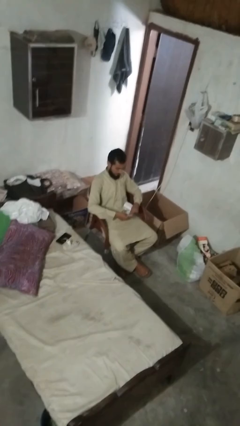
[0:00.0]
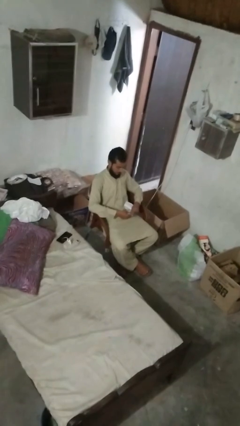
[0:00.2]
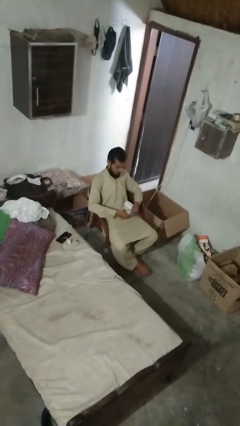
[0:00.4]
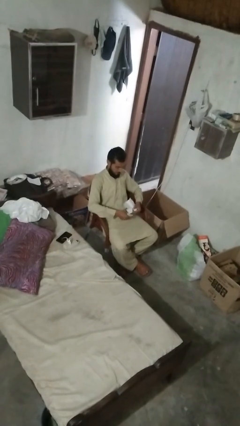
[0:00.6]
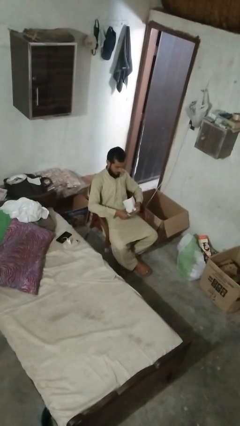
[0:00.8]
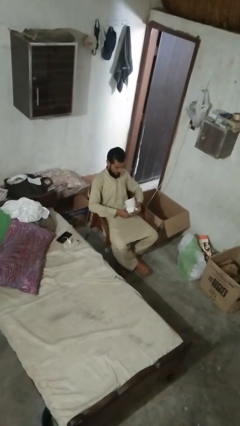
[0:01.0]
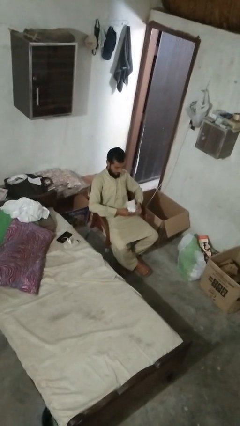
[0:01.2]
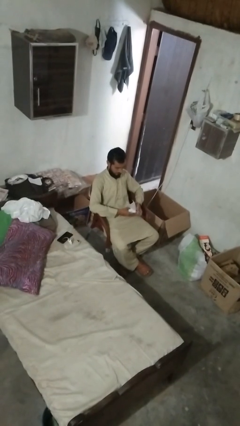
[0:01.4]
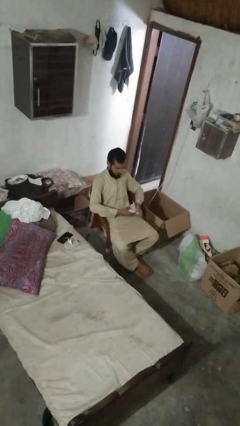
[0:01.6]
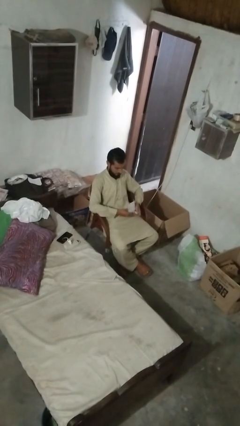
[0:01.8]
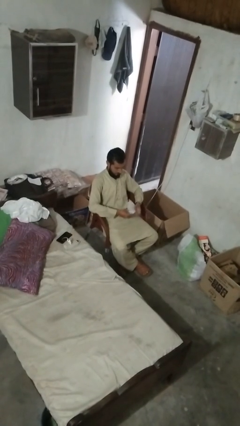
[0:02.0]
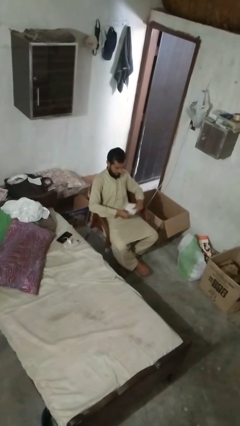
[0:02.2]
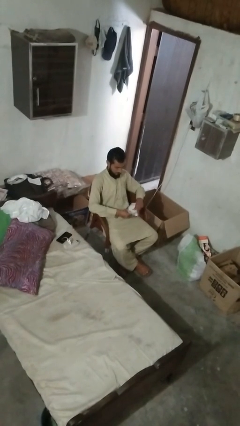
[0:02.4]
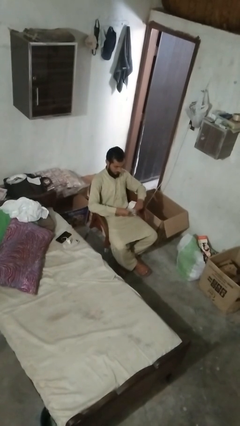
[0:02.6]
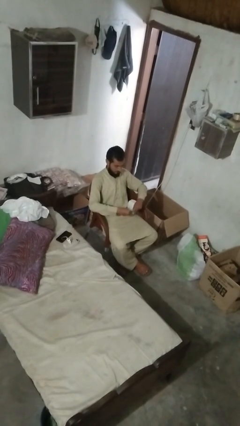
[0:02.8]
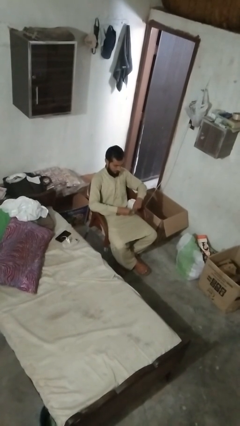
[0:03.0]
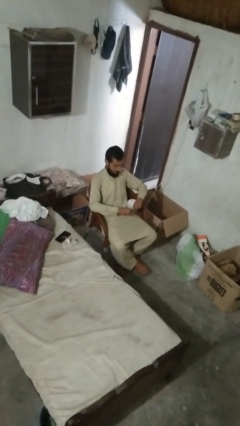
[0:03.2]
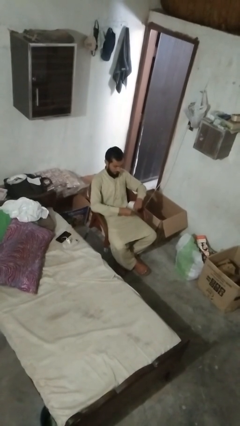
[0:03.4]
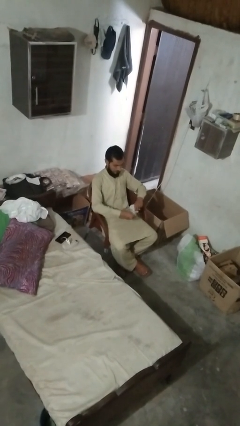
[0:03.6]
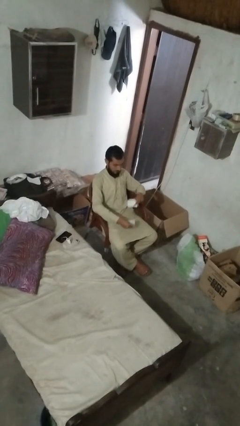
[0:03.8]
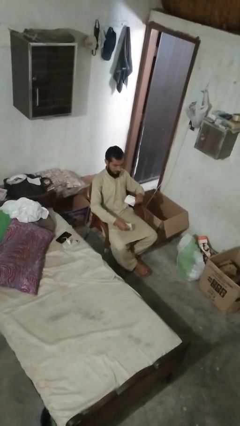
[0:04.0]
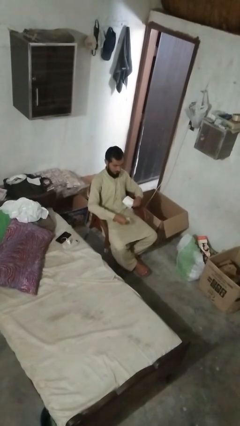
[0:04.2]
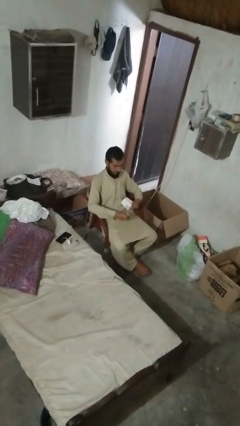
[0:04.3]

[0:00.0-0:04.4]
person tears paper

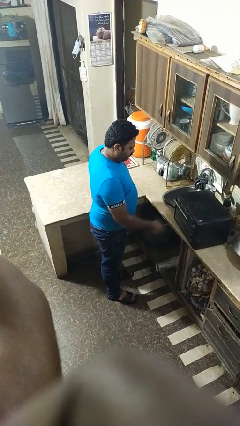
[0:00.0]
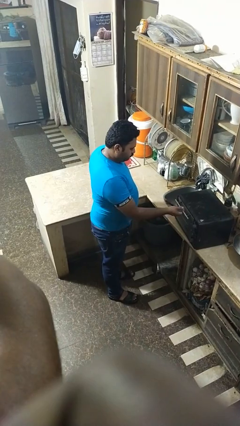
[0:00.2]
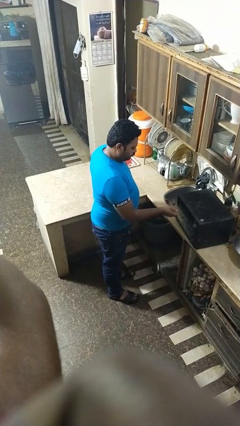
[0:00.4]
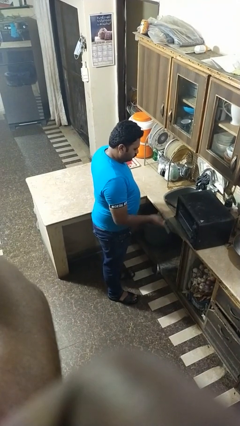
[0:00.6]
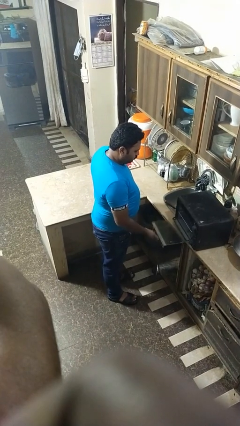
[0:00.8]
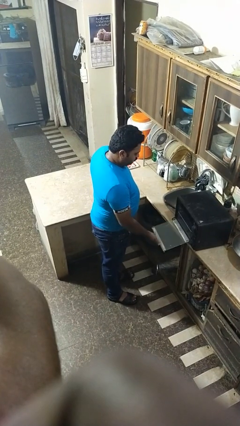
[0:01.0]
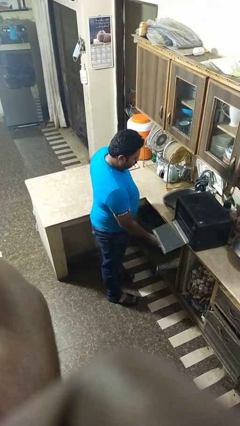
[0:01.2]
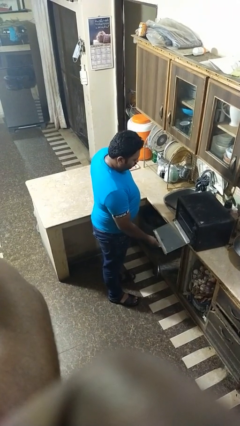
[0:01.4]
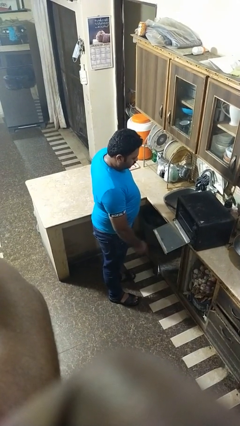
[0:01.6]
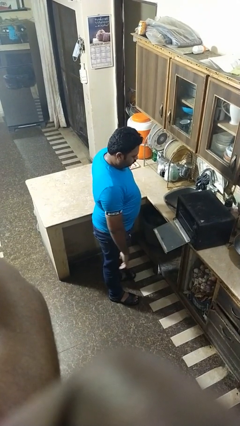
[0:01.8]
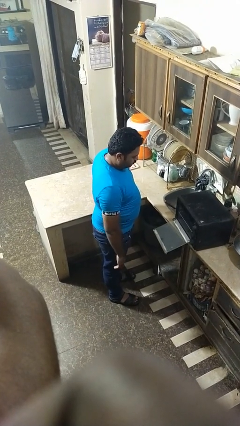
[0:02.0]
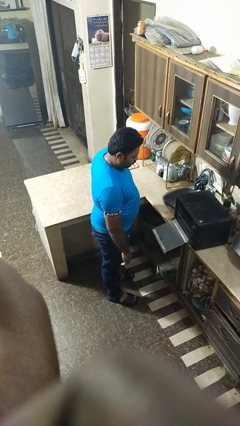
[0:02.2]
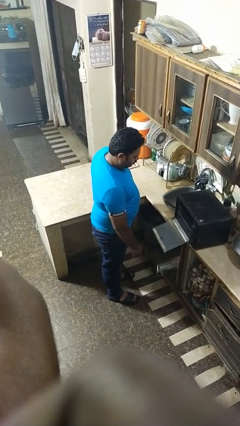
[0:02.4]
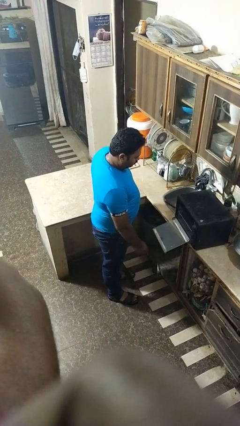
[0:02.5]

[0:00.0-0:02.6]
person opens oven door

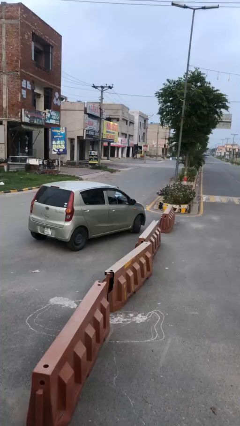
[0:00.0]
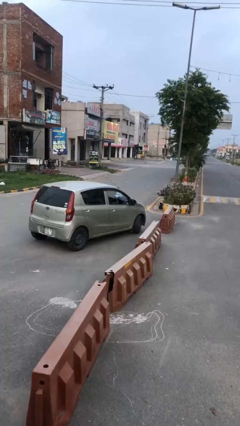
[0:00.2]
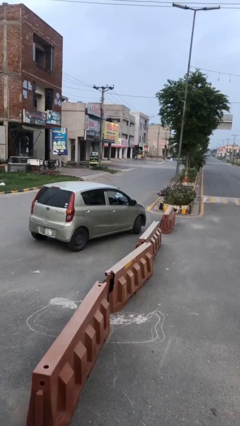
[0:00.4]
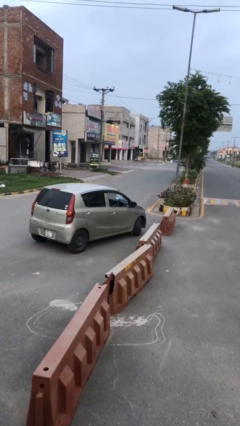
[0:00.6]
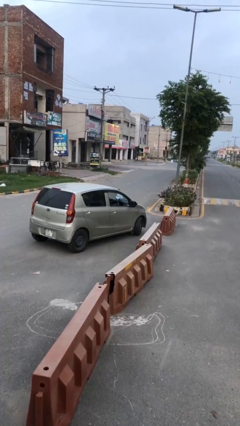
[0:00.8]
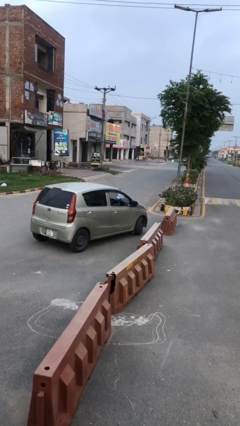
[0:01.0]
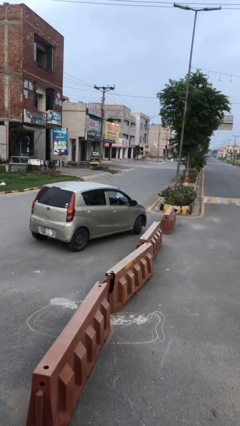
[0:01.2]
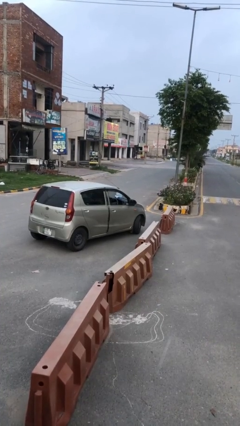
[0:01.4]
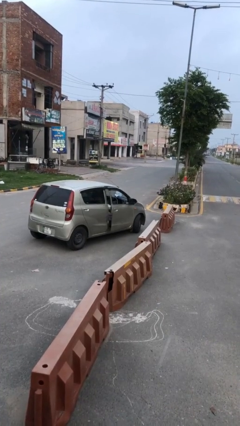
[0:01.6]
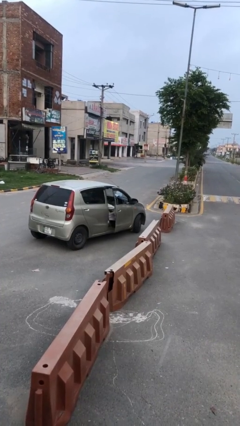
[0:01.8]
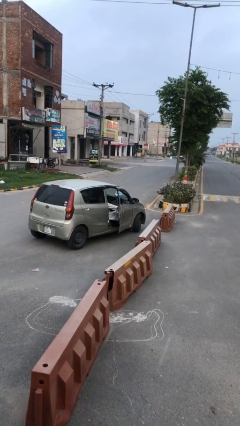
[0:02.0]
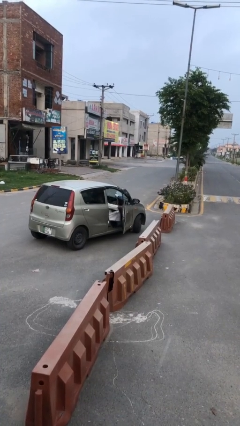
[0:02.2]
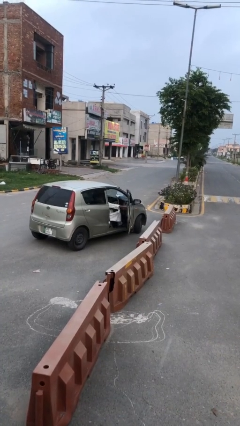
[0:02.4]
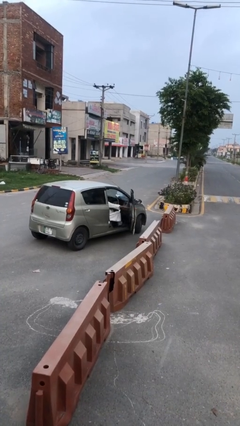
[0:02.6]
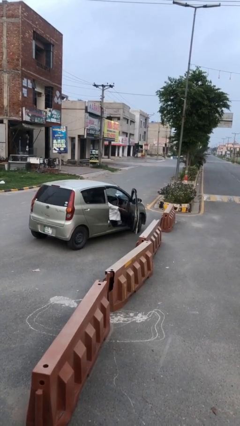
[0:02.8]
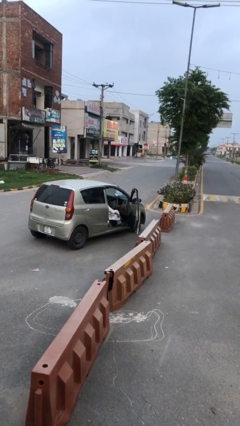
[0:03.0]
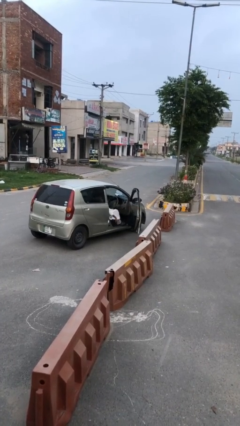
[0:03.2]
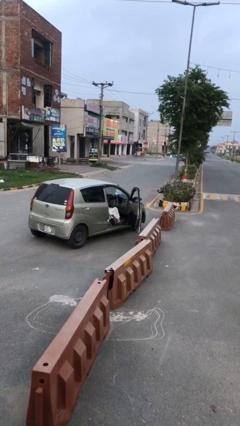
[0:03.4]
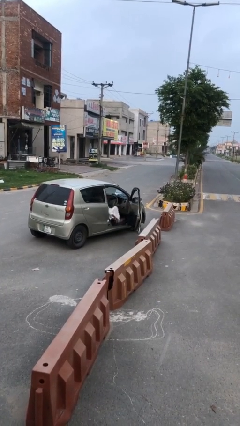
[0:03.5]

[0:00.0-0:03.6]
person opens car door

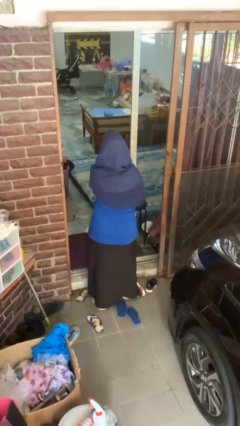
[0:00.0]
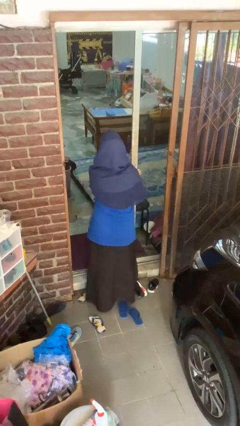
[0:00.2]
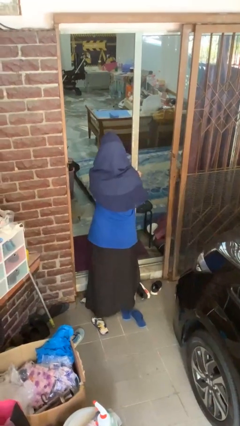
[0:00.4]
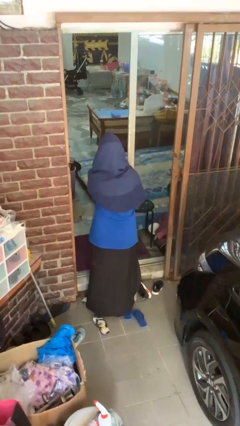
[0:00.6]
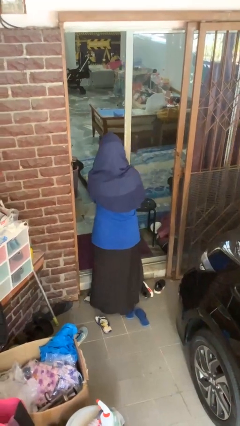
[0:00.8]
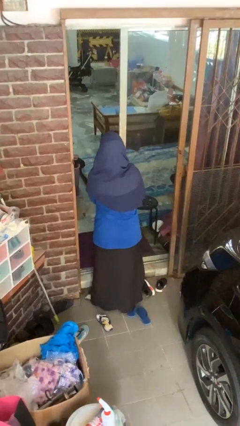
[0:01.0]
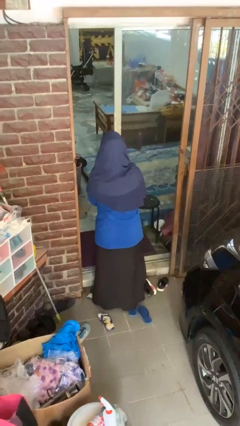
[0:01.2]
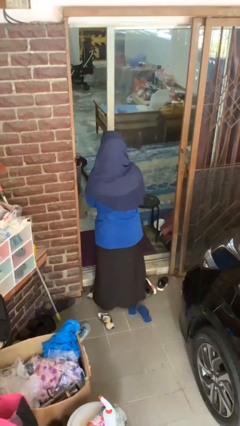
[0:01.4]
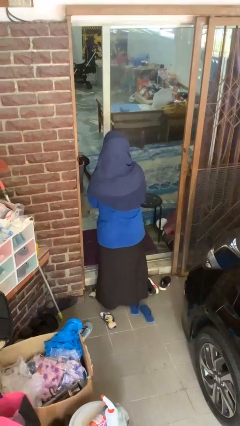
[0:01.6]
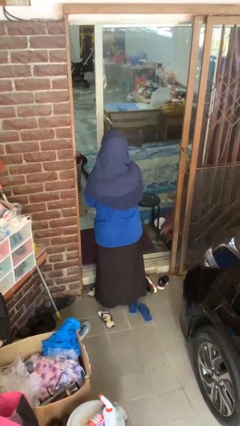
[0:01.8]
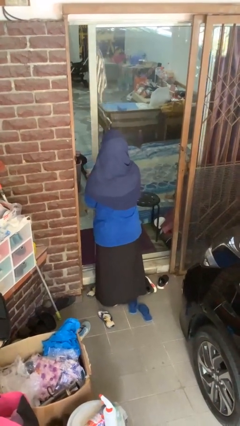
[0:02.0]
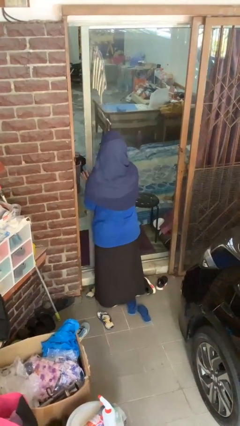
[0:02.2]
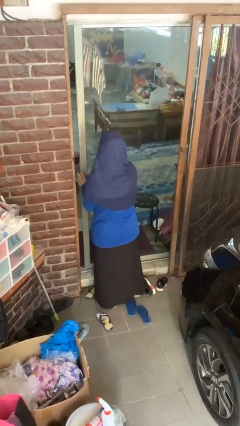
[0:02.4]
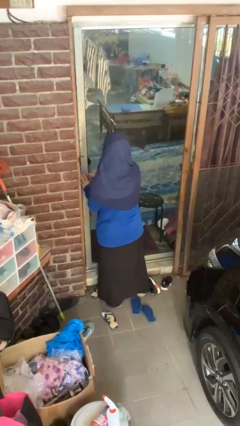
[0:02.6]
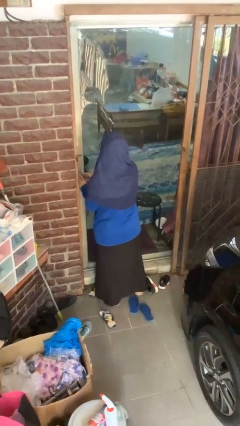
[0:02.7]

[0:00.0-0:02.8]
person closes sliding door

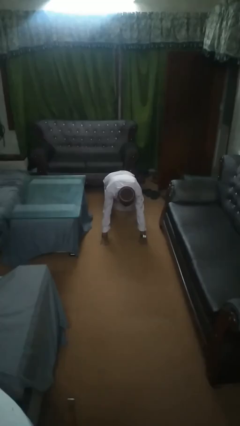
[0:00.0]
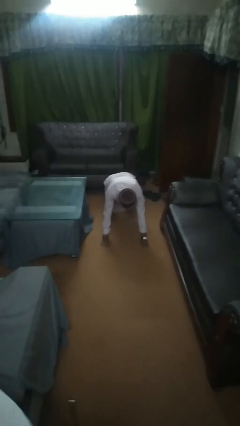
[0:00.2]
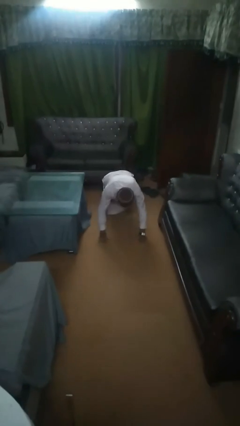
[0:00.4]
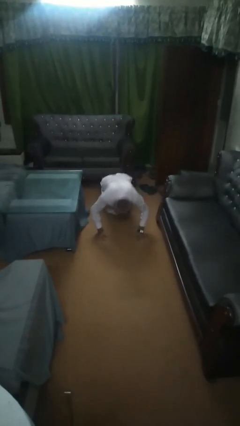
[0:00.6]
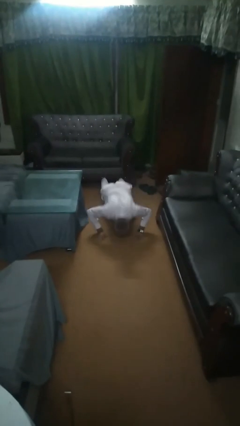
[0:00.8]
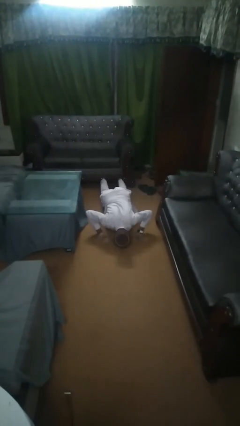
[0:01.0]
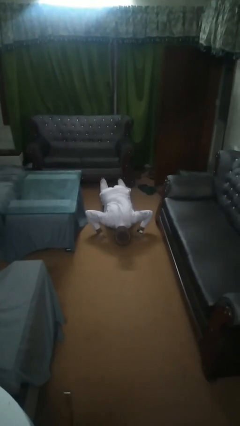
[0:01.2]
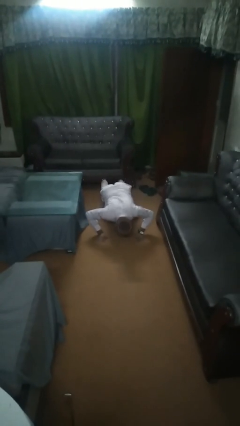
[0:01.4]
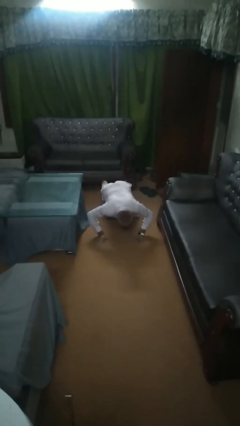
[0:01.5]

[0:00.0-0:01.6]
person exercises with pushup

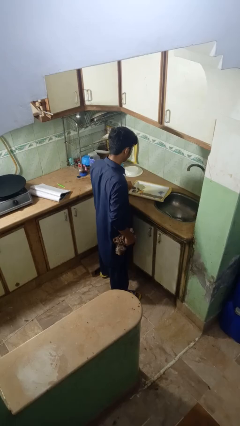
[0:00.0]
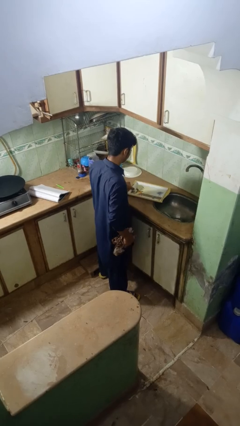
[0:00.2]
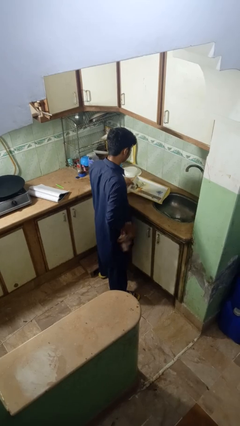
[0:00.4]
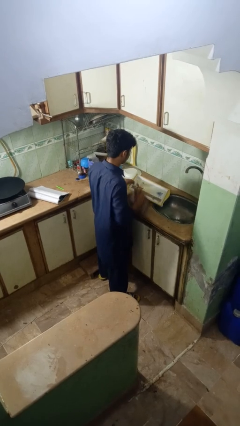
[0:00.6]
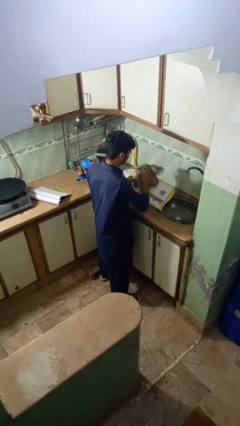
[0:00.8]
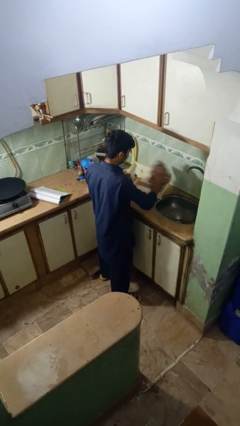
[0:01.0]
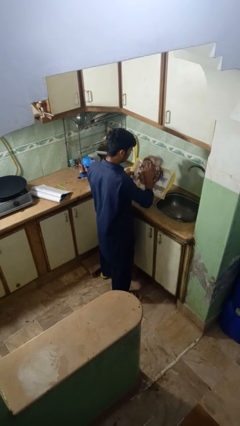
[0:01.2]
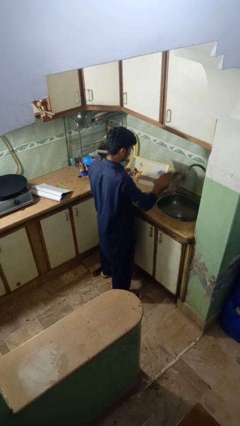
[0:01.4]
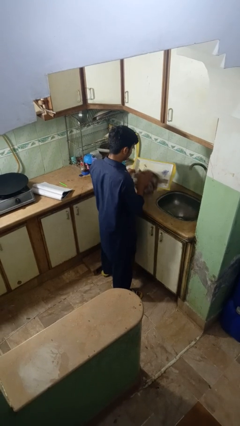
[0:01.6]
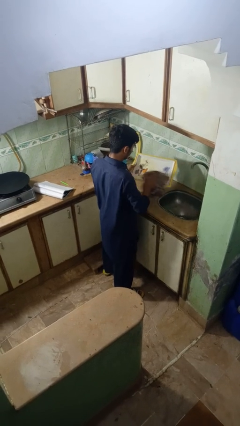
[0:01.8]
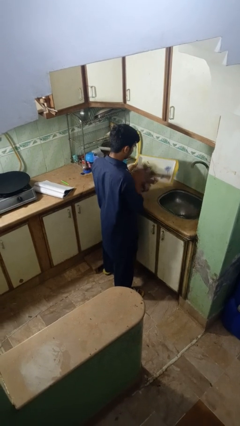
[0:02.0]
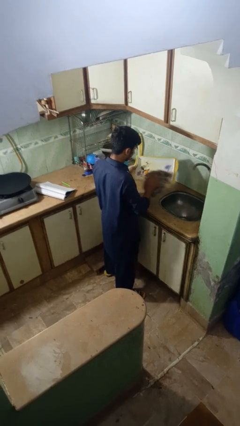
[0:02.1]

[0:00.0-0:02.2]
person dries dish

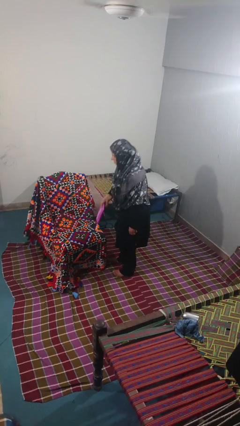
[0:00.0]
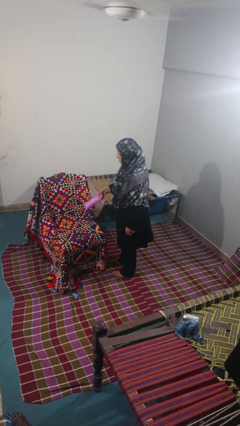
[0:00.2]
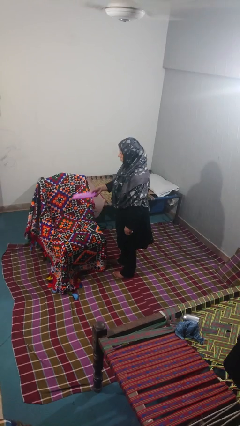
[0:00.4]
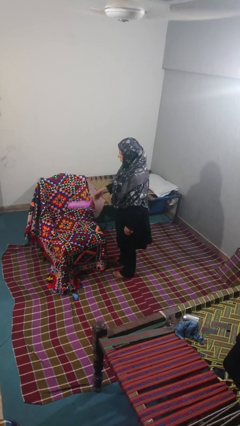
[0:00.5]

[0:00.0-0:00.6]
person puts down object on couch
